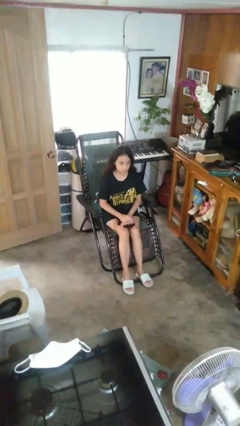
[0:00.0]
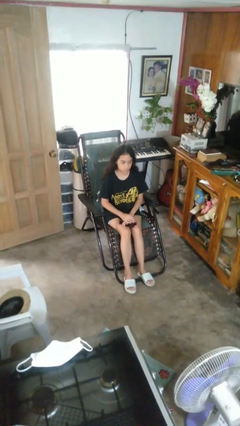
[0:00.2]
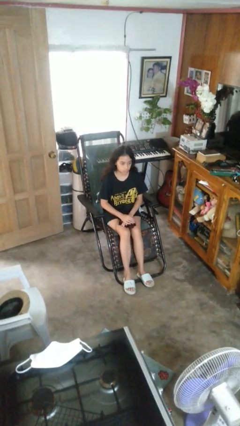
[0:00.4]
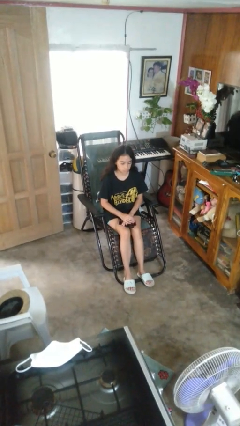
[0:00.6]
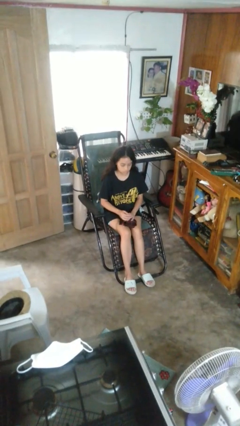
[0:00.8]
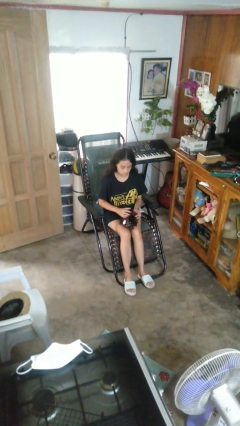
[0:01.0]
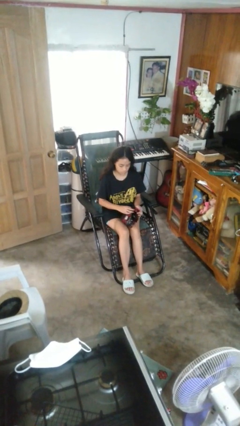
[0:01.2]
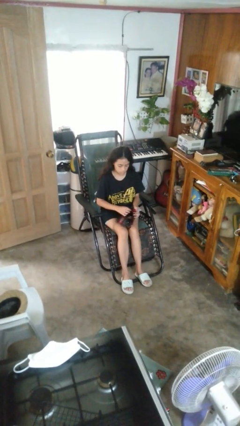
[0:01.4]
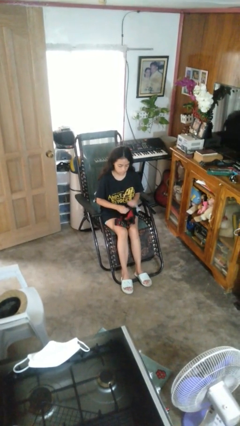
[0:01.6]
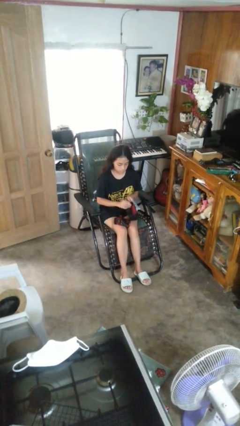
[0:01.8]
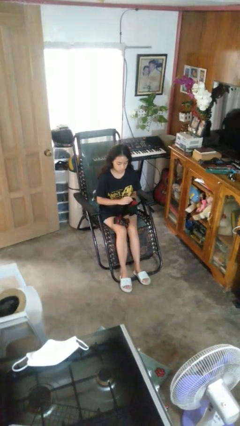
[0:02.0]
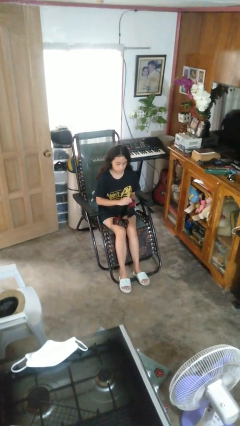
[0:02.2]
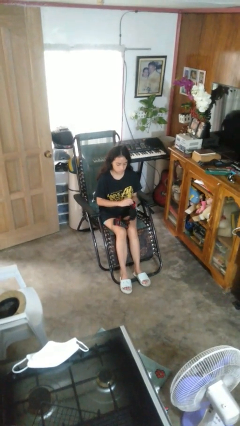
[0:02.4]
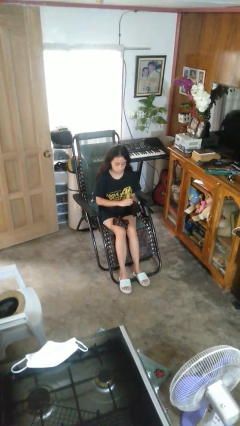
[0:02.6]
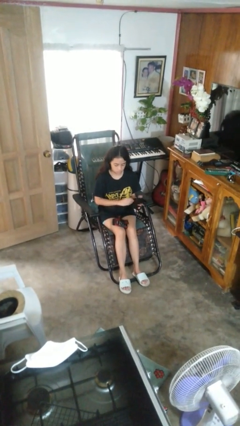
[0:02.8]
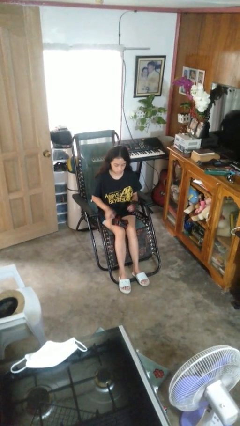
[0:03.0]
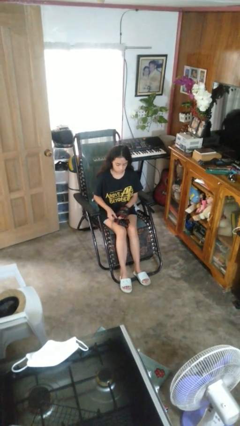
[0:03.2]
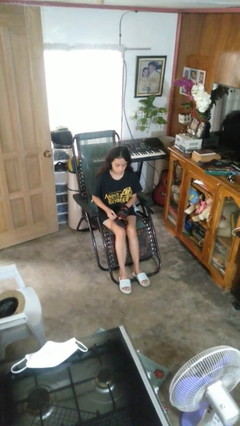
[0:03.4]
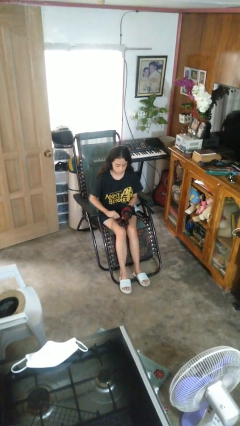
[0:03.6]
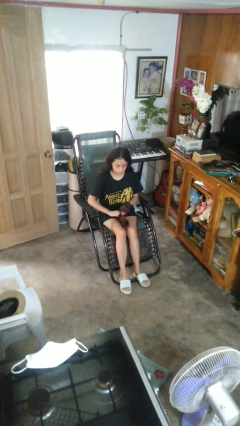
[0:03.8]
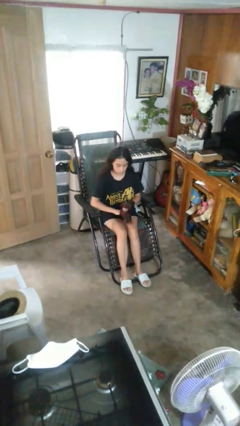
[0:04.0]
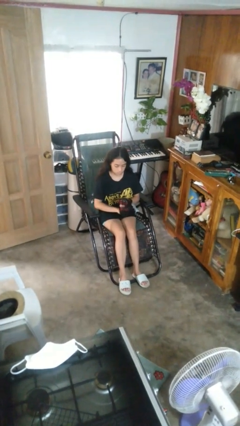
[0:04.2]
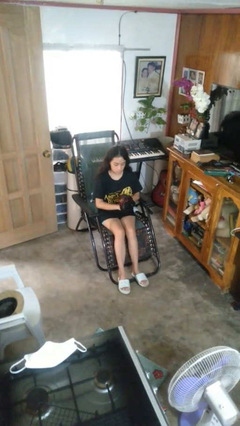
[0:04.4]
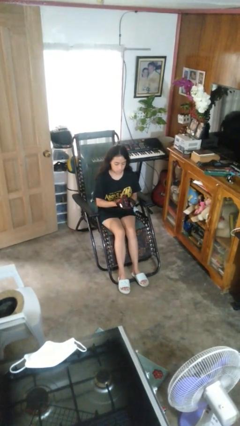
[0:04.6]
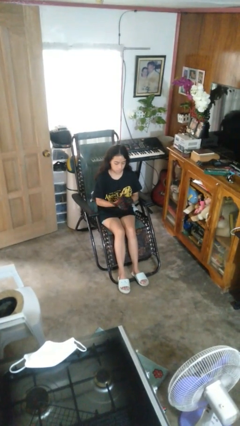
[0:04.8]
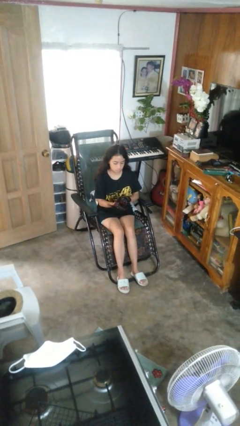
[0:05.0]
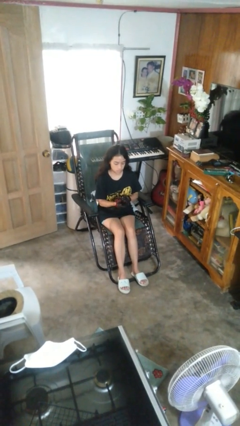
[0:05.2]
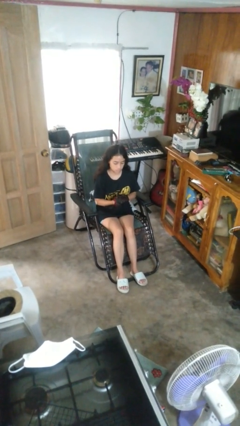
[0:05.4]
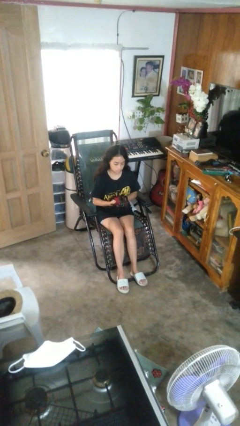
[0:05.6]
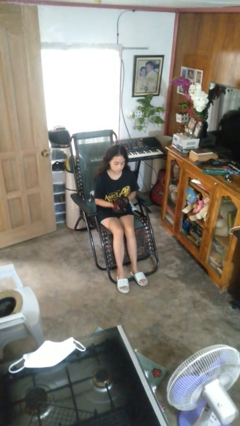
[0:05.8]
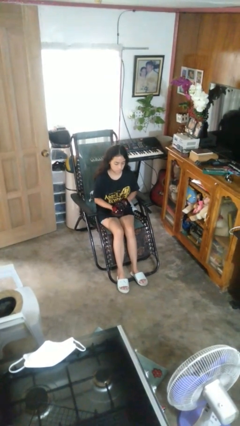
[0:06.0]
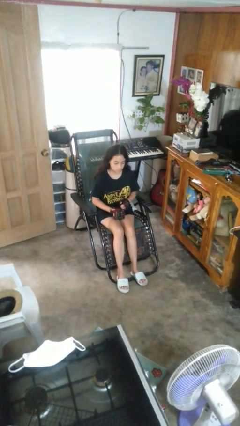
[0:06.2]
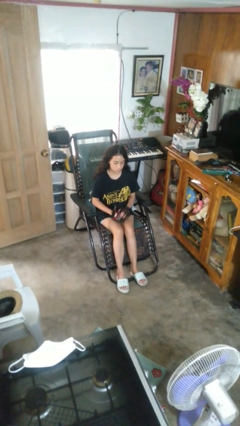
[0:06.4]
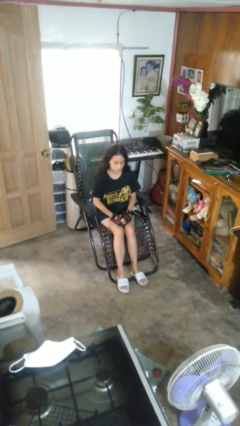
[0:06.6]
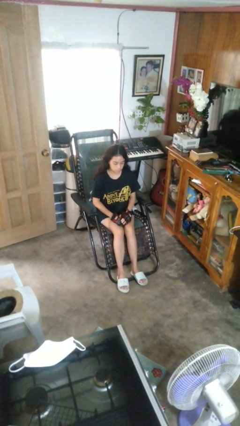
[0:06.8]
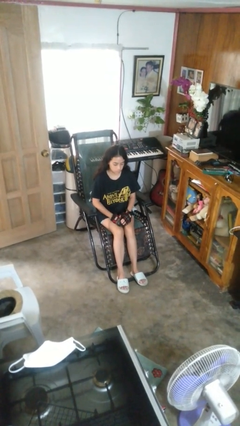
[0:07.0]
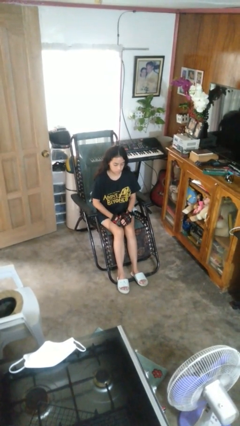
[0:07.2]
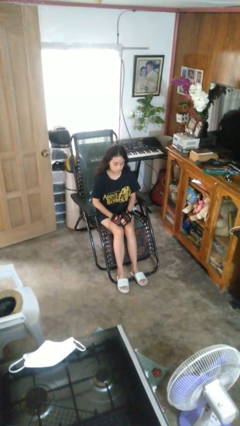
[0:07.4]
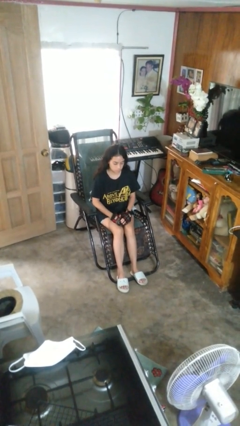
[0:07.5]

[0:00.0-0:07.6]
person puts on gloves

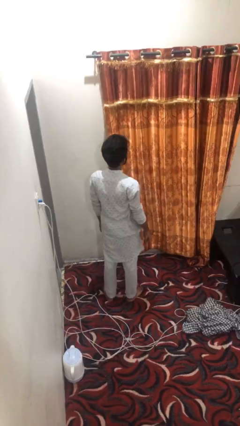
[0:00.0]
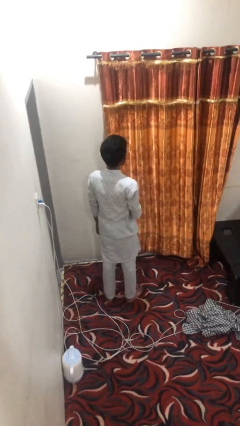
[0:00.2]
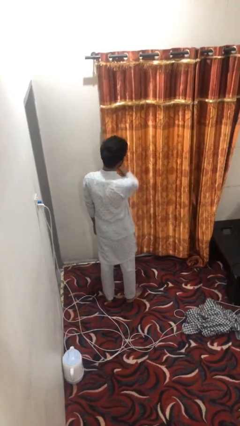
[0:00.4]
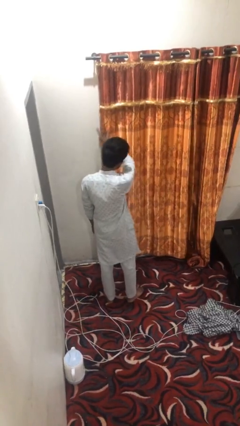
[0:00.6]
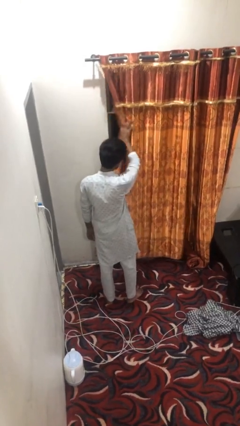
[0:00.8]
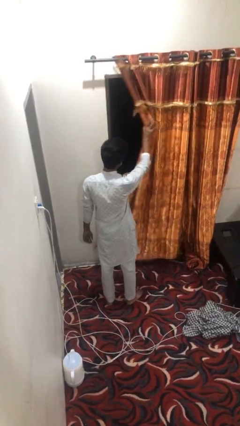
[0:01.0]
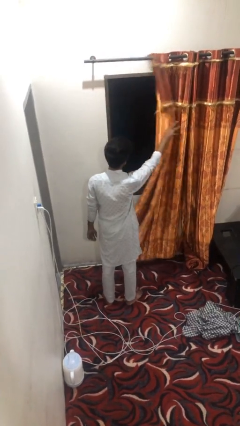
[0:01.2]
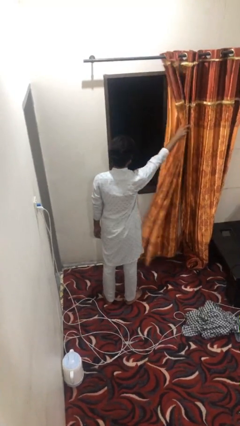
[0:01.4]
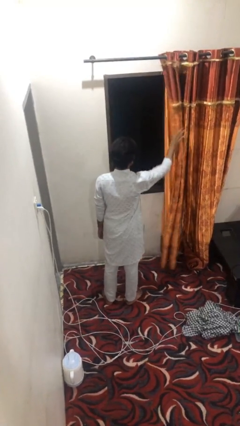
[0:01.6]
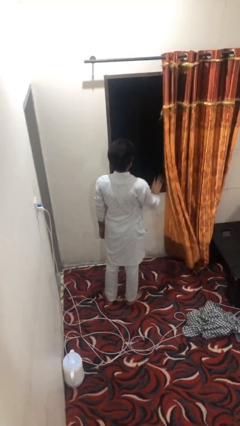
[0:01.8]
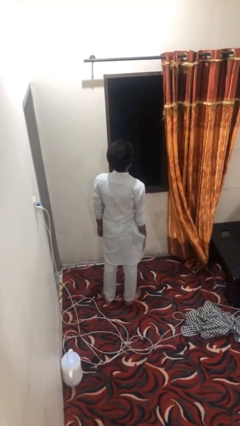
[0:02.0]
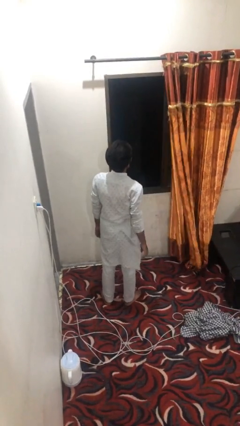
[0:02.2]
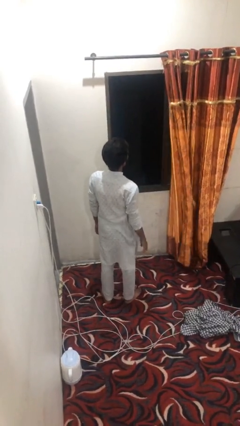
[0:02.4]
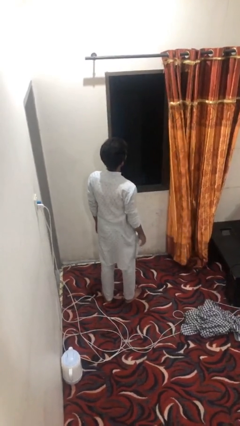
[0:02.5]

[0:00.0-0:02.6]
person opens curtains

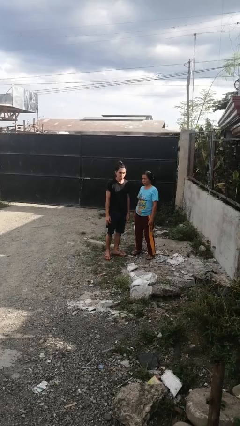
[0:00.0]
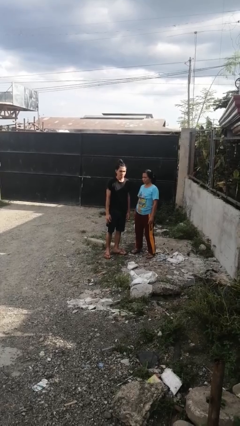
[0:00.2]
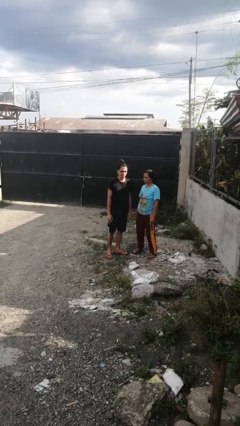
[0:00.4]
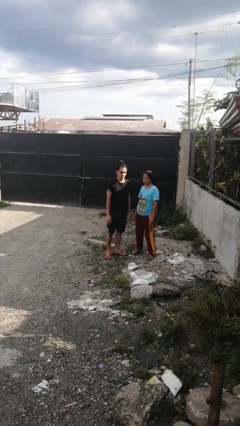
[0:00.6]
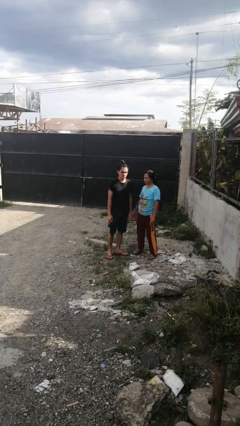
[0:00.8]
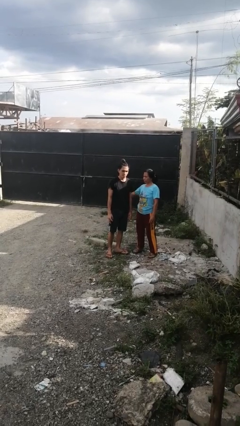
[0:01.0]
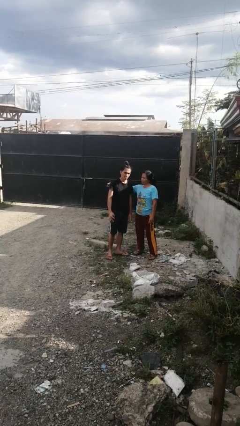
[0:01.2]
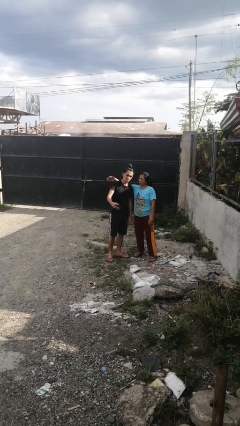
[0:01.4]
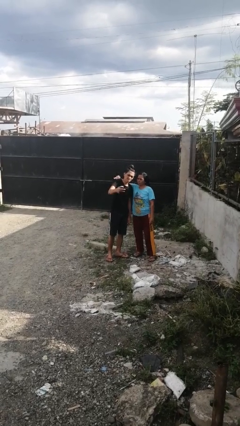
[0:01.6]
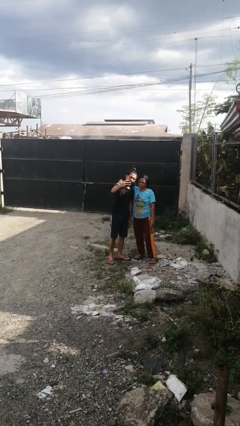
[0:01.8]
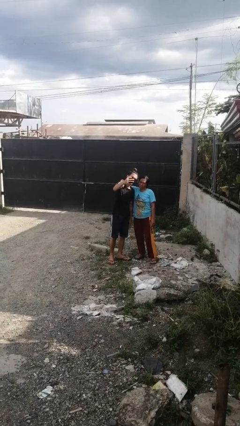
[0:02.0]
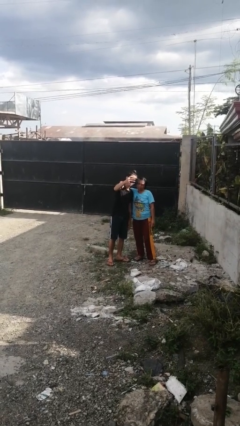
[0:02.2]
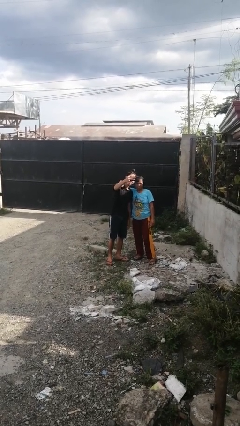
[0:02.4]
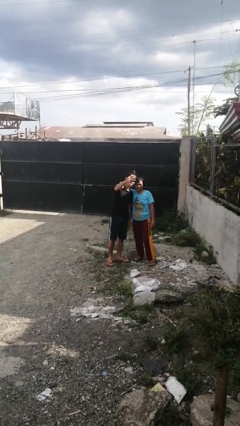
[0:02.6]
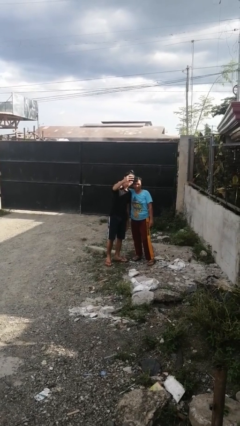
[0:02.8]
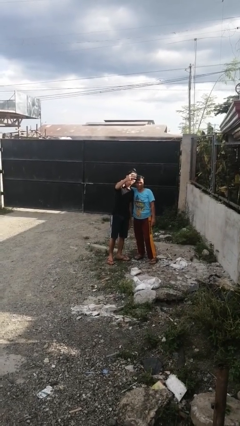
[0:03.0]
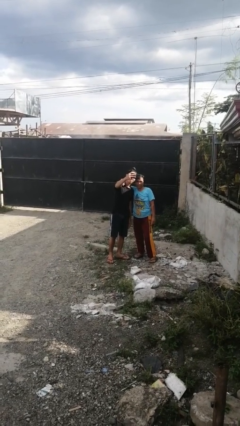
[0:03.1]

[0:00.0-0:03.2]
person takes selfie with person

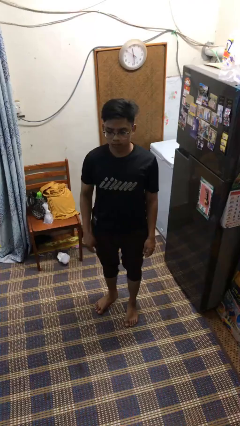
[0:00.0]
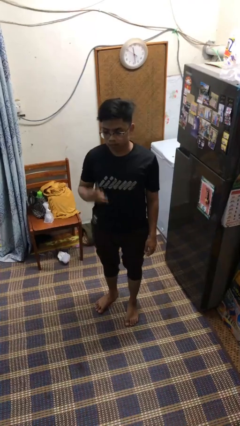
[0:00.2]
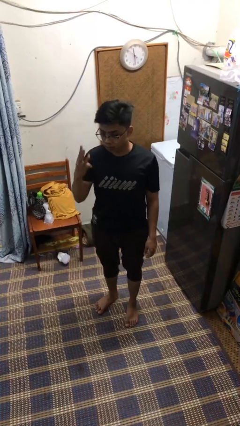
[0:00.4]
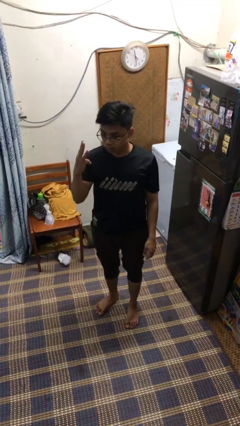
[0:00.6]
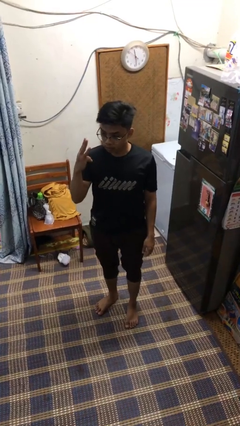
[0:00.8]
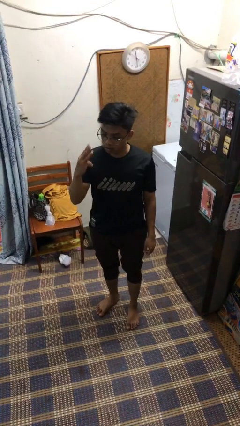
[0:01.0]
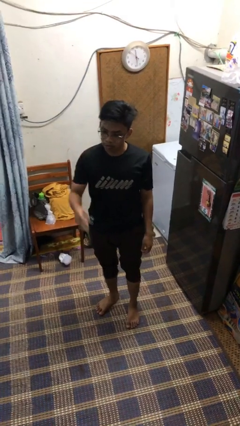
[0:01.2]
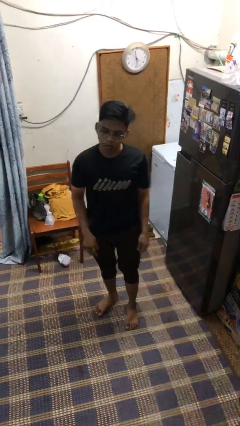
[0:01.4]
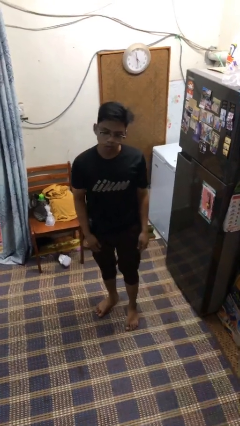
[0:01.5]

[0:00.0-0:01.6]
person gestures number three

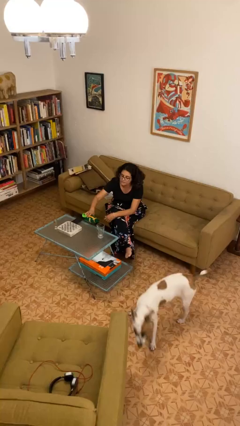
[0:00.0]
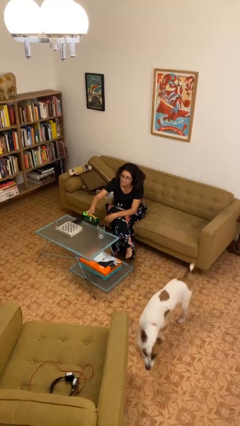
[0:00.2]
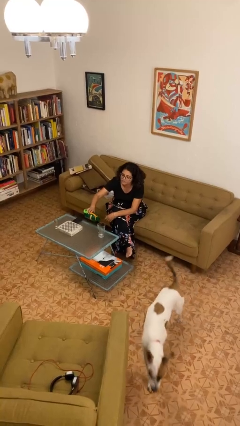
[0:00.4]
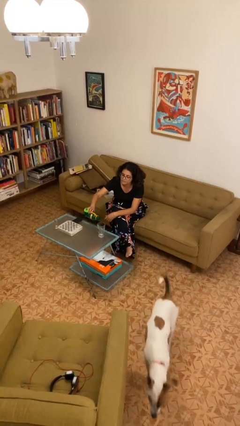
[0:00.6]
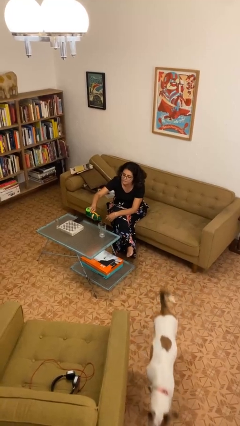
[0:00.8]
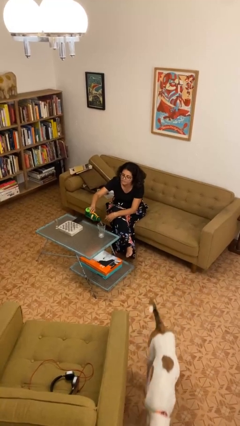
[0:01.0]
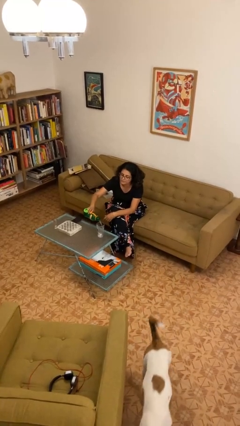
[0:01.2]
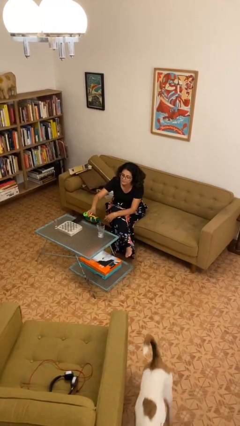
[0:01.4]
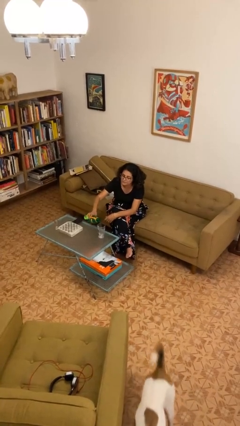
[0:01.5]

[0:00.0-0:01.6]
person pours liquid into cup

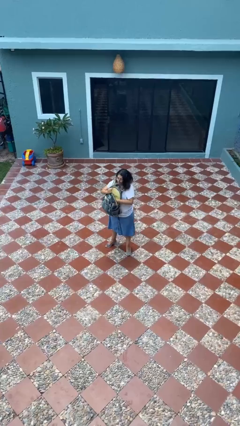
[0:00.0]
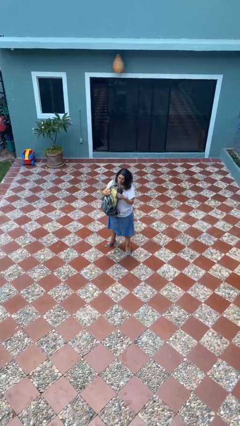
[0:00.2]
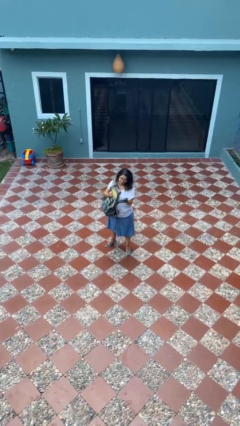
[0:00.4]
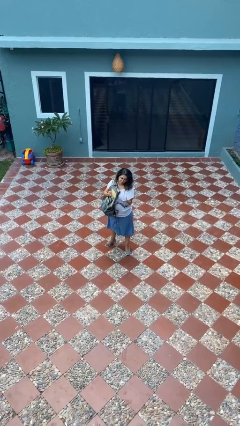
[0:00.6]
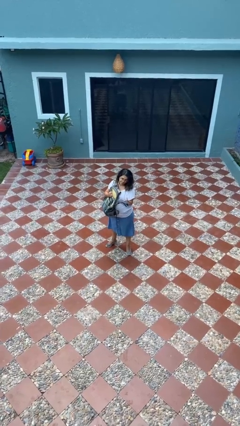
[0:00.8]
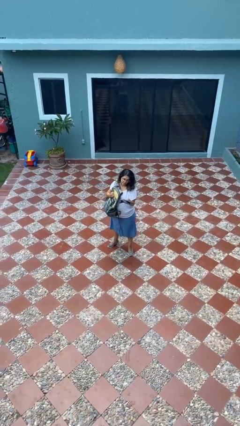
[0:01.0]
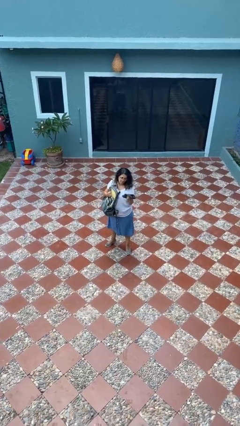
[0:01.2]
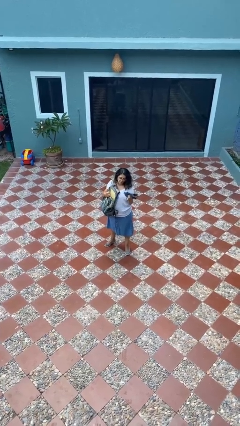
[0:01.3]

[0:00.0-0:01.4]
person takes object from backpack
